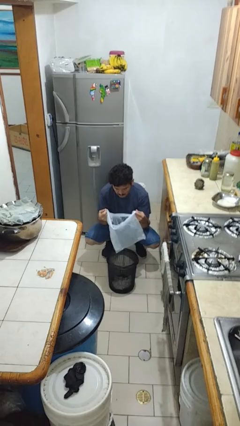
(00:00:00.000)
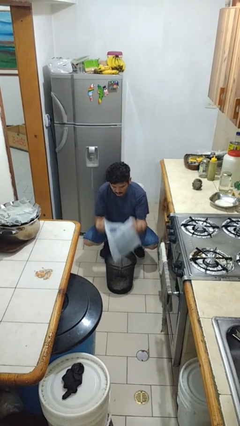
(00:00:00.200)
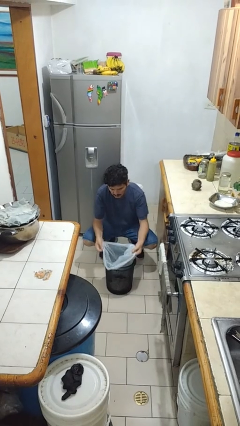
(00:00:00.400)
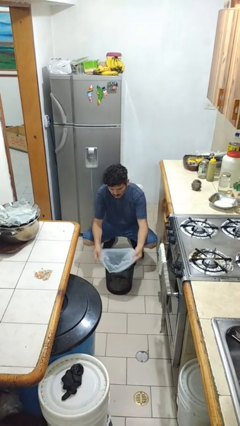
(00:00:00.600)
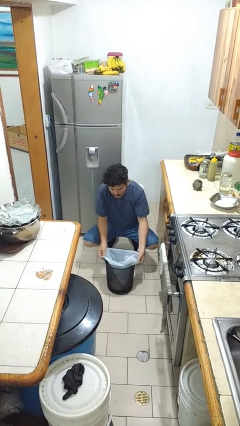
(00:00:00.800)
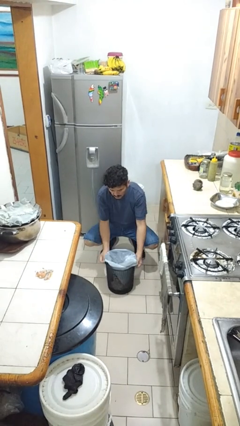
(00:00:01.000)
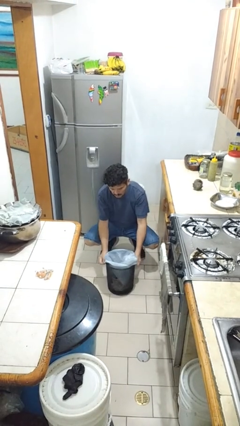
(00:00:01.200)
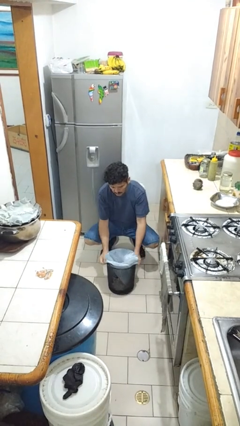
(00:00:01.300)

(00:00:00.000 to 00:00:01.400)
person inserts trashbag into trashcan

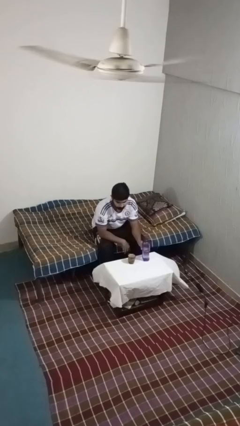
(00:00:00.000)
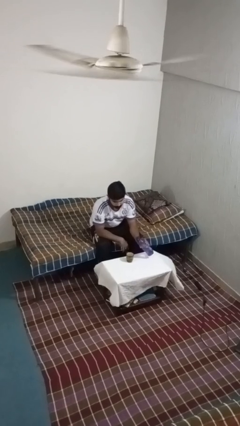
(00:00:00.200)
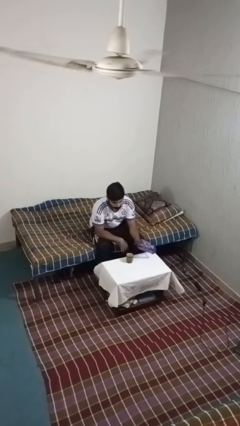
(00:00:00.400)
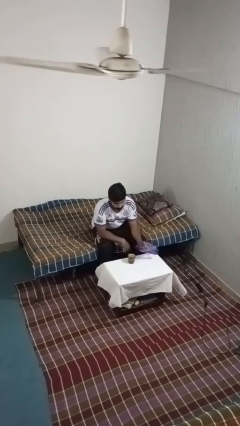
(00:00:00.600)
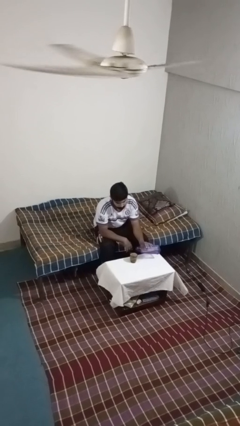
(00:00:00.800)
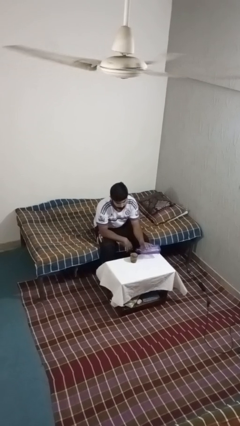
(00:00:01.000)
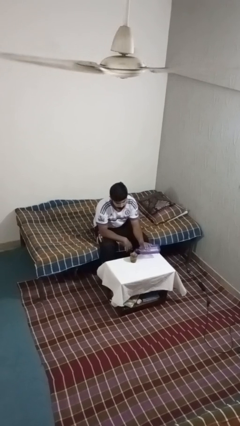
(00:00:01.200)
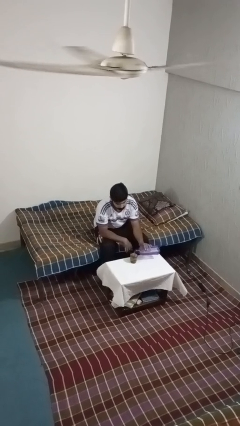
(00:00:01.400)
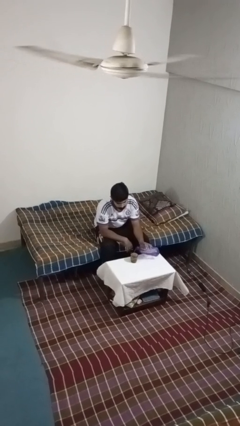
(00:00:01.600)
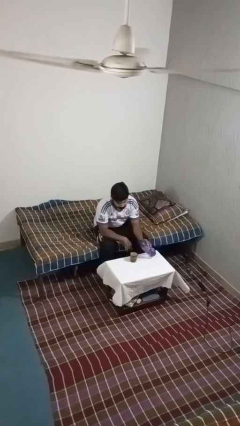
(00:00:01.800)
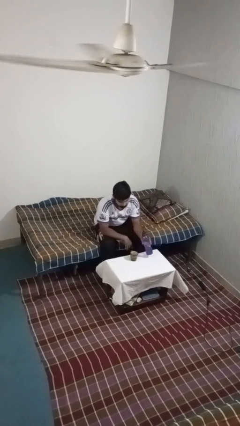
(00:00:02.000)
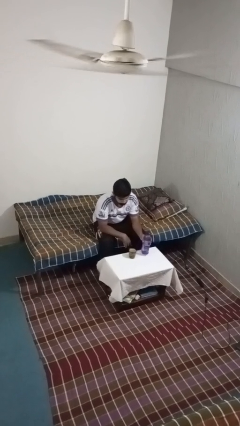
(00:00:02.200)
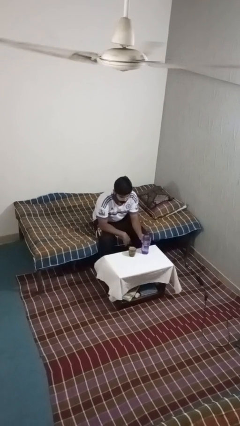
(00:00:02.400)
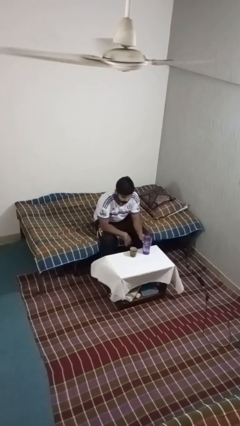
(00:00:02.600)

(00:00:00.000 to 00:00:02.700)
person pours liquid into cup

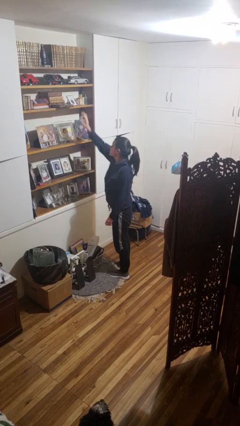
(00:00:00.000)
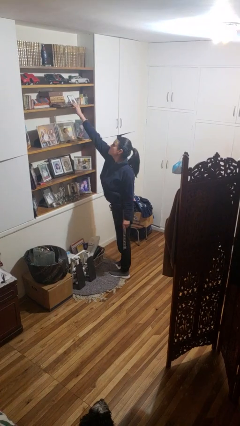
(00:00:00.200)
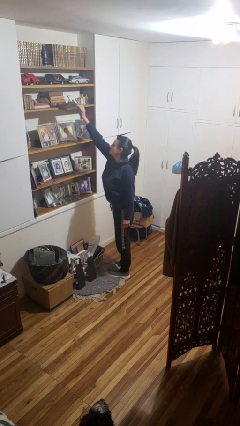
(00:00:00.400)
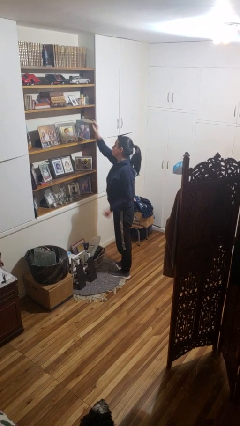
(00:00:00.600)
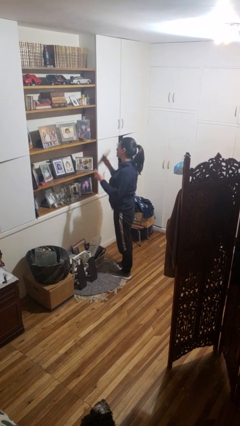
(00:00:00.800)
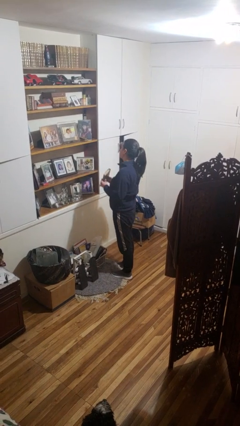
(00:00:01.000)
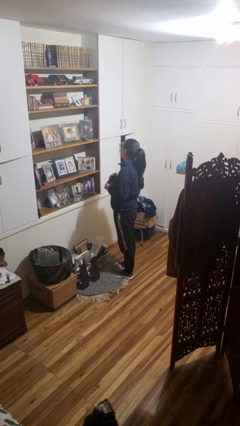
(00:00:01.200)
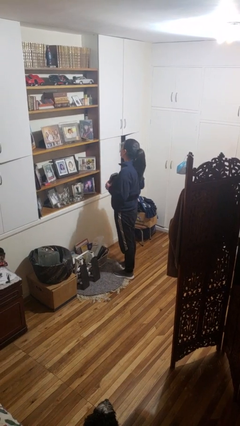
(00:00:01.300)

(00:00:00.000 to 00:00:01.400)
person picks up object from shelf

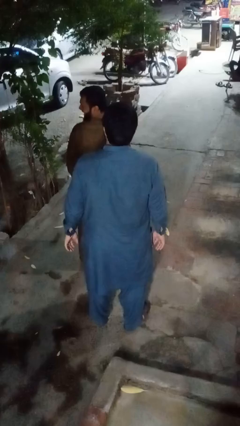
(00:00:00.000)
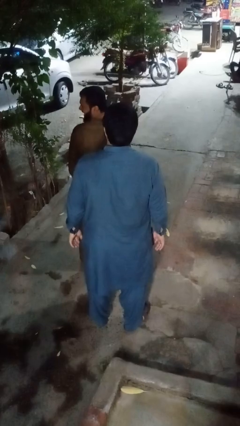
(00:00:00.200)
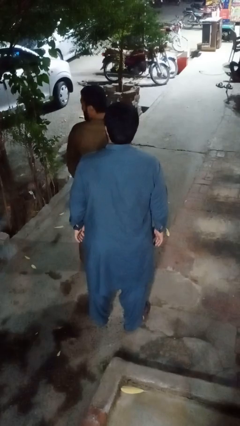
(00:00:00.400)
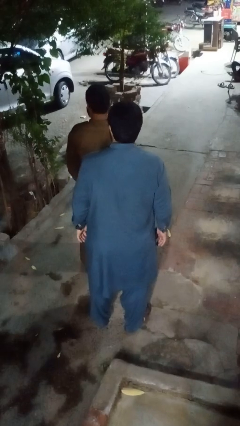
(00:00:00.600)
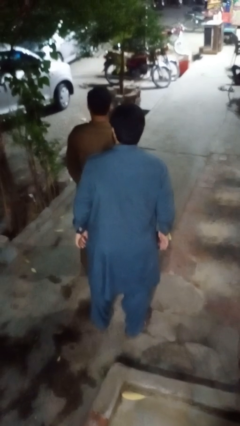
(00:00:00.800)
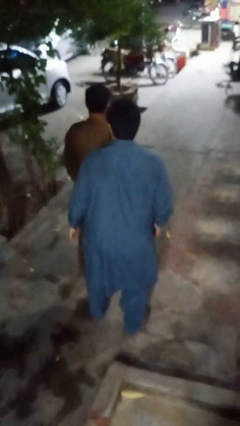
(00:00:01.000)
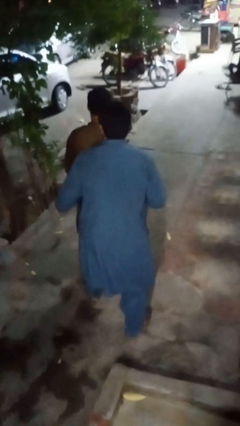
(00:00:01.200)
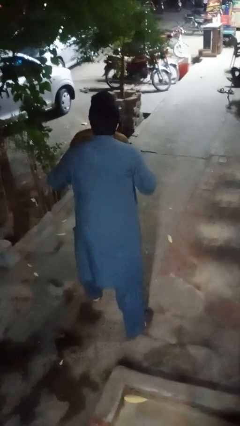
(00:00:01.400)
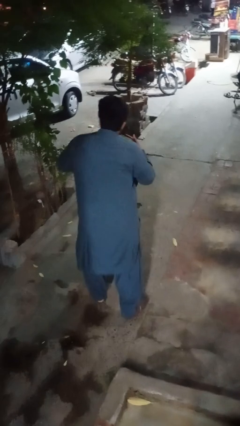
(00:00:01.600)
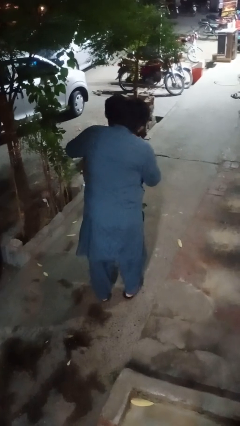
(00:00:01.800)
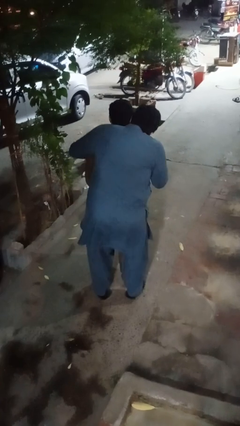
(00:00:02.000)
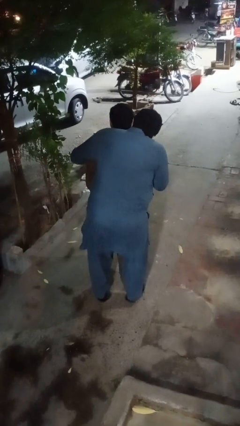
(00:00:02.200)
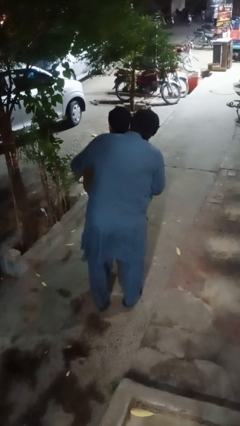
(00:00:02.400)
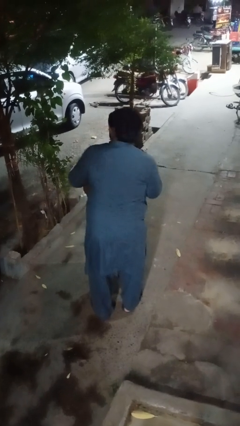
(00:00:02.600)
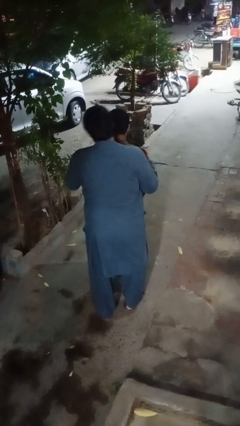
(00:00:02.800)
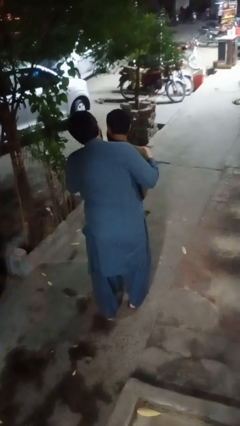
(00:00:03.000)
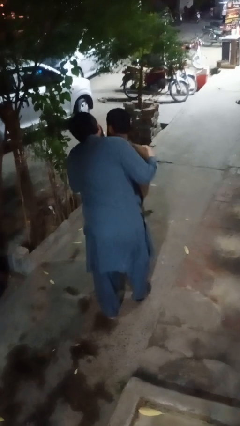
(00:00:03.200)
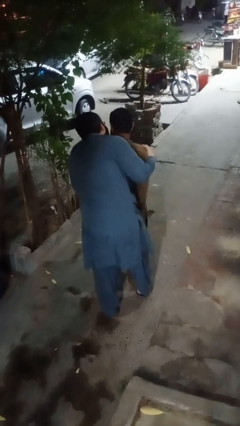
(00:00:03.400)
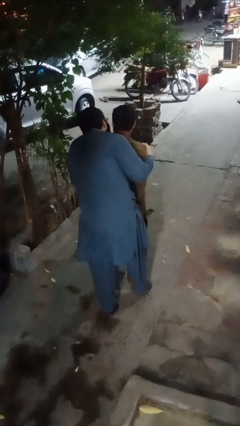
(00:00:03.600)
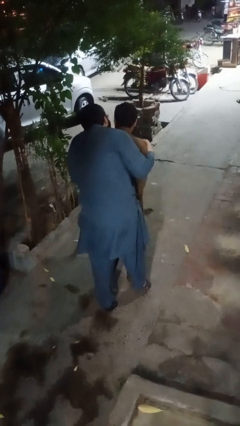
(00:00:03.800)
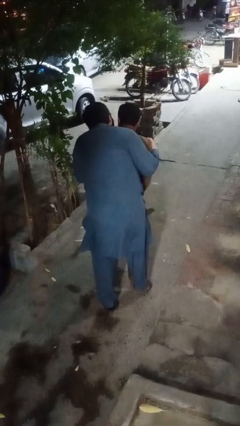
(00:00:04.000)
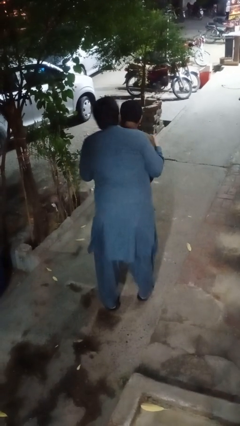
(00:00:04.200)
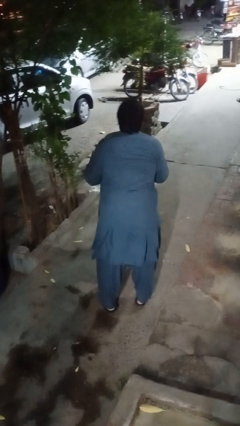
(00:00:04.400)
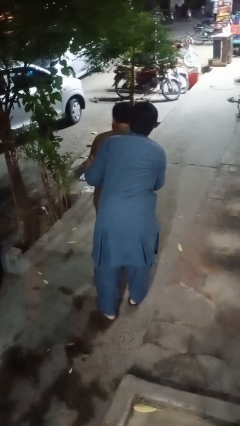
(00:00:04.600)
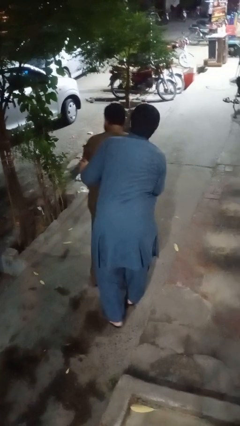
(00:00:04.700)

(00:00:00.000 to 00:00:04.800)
person looks over shoulder

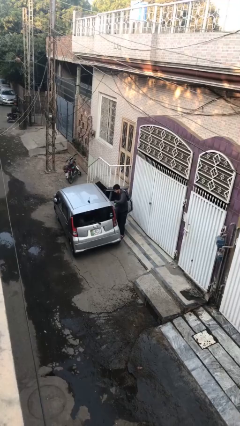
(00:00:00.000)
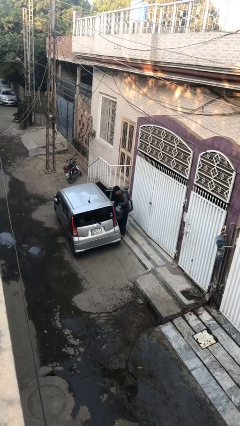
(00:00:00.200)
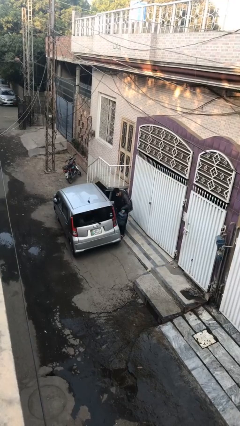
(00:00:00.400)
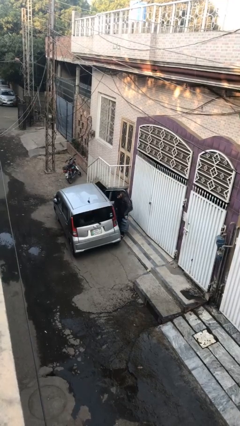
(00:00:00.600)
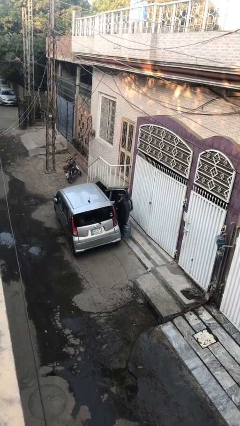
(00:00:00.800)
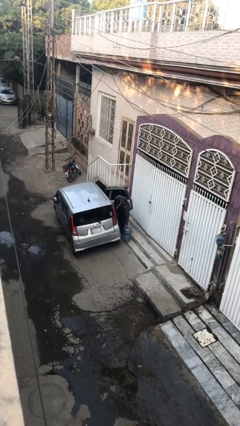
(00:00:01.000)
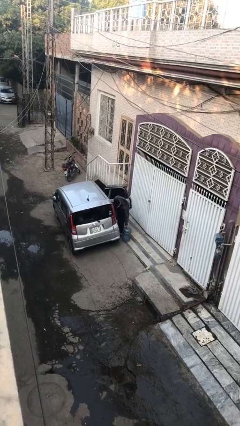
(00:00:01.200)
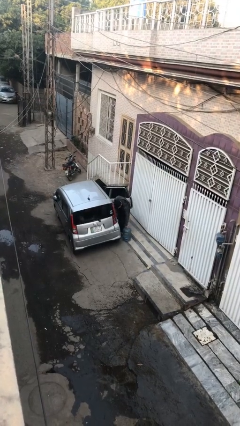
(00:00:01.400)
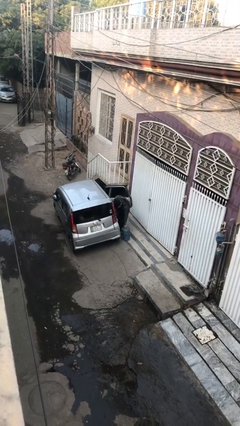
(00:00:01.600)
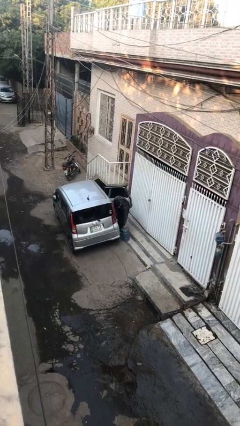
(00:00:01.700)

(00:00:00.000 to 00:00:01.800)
person unloads car

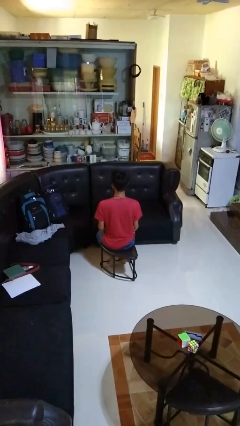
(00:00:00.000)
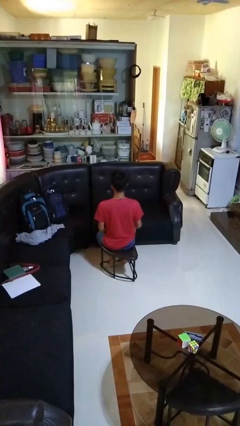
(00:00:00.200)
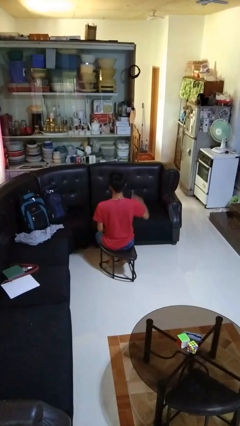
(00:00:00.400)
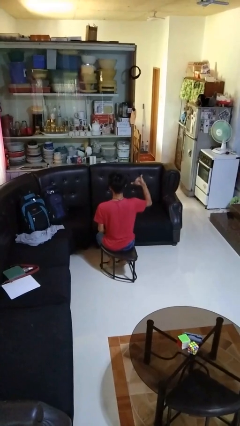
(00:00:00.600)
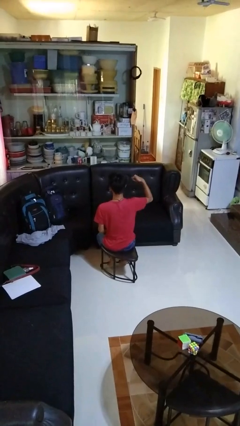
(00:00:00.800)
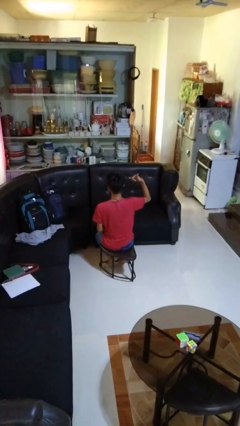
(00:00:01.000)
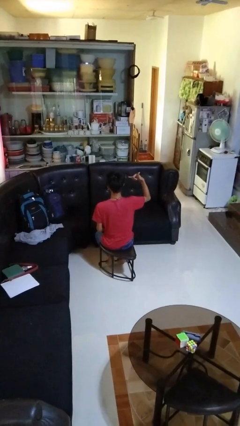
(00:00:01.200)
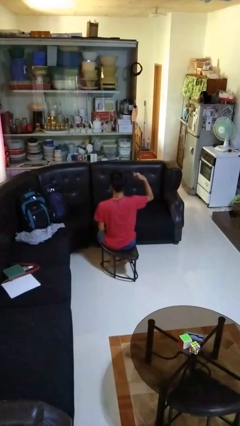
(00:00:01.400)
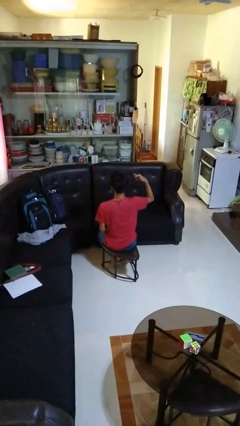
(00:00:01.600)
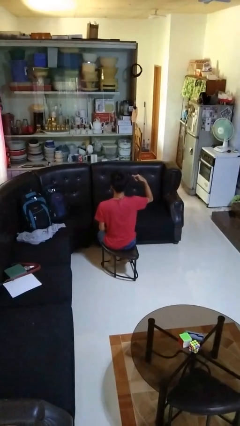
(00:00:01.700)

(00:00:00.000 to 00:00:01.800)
person gestures hang loose

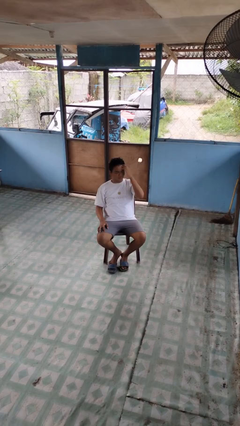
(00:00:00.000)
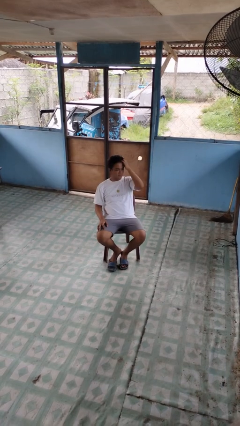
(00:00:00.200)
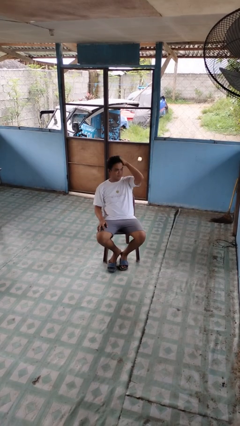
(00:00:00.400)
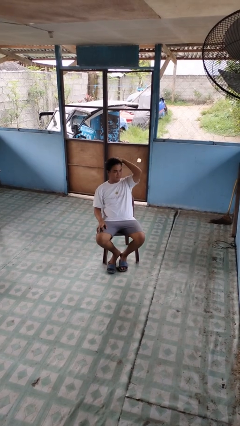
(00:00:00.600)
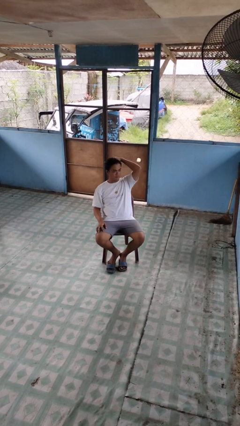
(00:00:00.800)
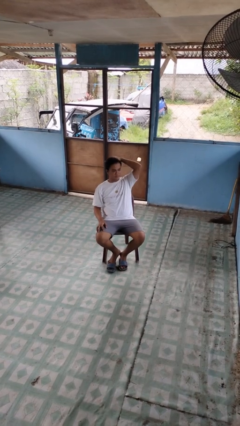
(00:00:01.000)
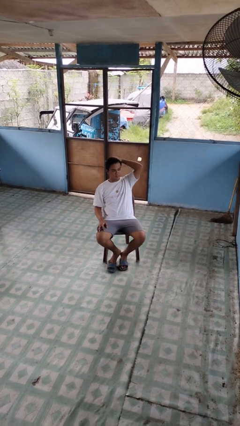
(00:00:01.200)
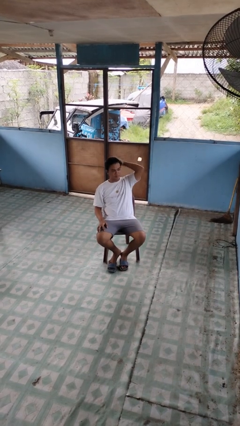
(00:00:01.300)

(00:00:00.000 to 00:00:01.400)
person strokes hair

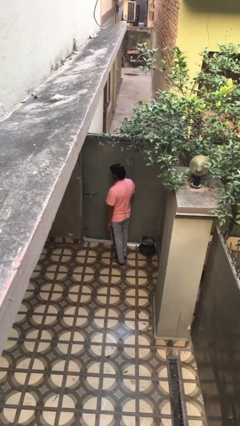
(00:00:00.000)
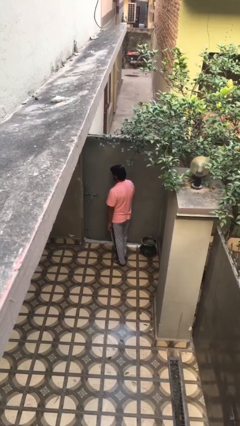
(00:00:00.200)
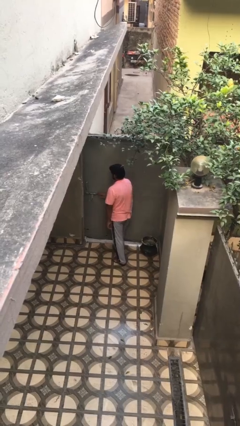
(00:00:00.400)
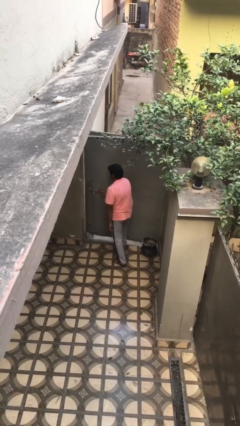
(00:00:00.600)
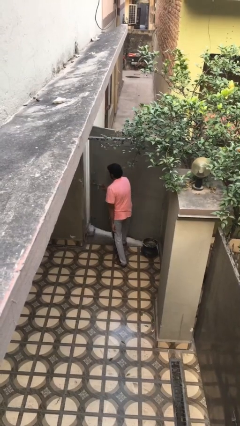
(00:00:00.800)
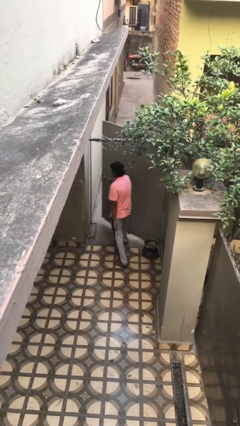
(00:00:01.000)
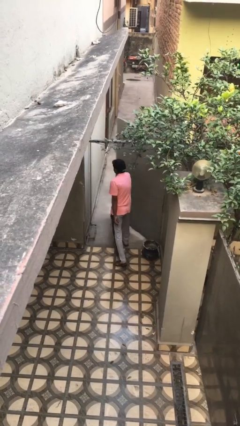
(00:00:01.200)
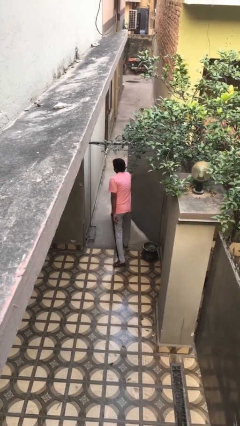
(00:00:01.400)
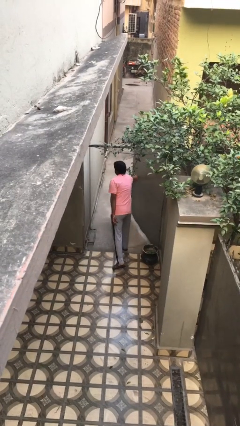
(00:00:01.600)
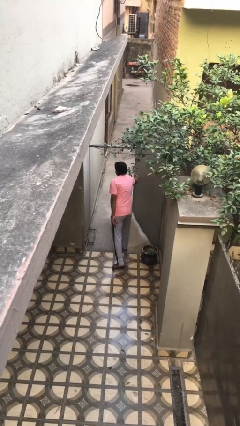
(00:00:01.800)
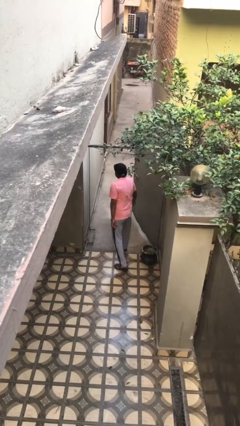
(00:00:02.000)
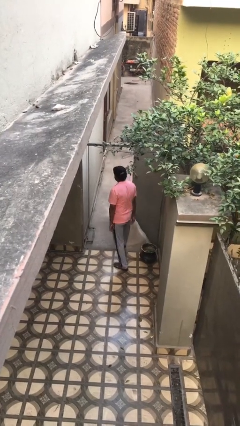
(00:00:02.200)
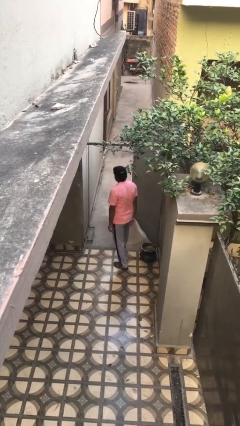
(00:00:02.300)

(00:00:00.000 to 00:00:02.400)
person opens facility door
